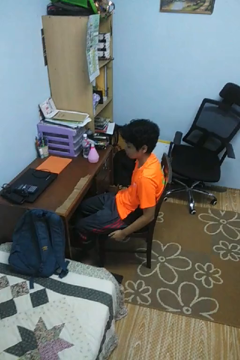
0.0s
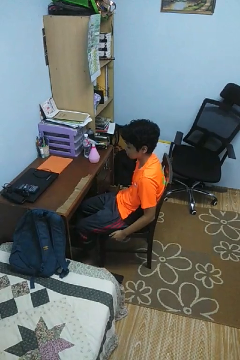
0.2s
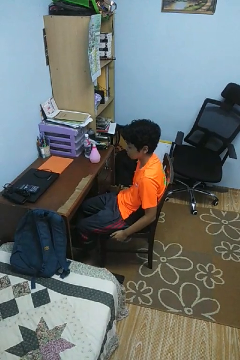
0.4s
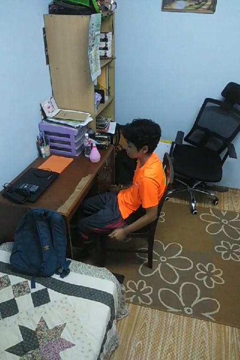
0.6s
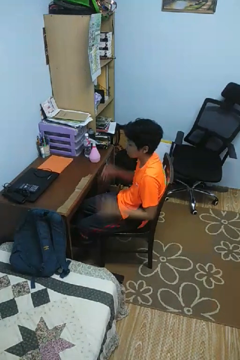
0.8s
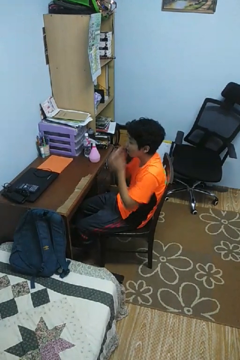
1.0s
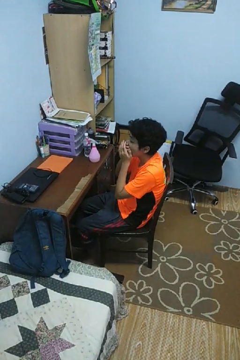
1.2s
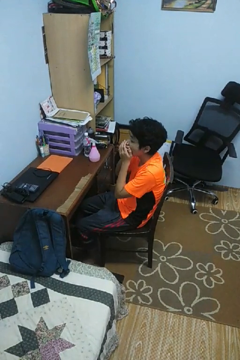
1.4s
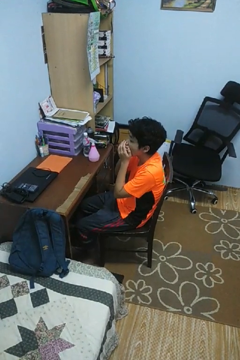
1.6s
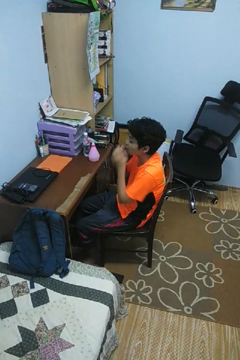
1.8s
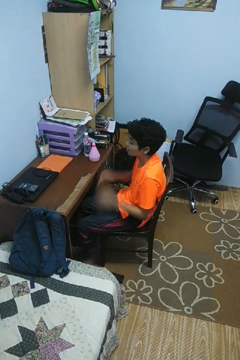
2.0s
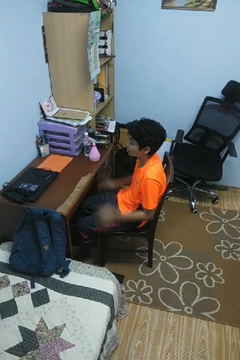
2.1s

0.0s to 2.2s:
person yawns

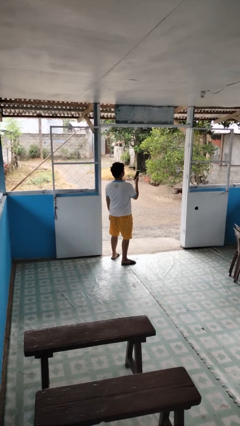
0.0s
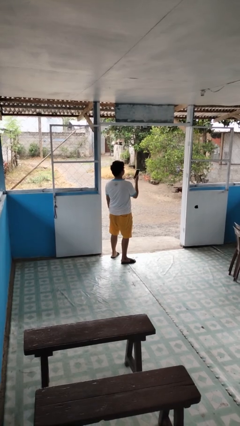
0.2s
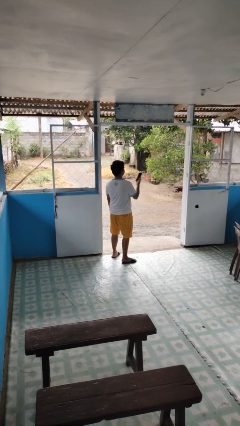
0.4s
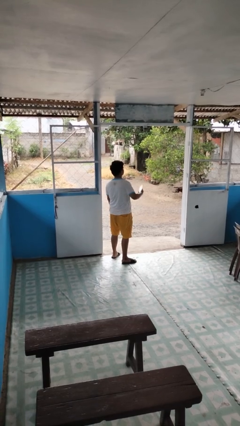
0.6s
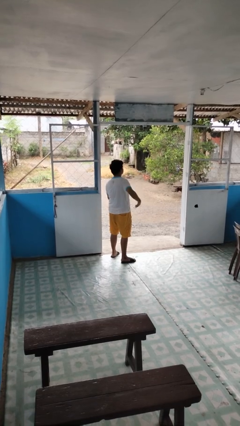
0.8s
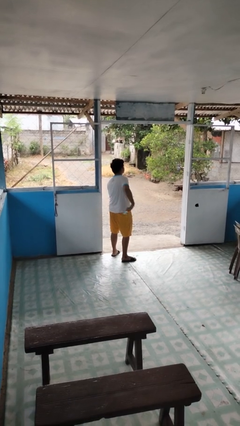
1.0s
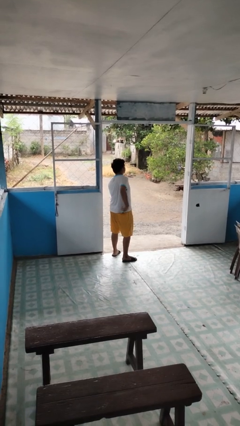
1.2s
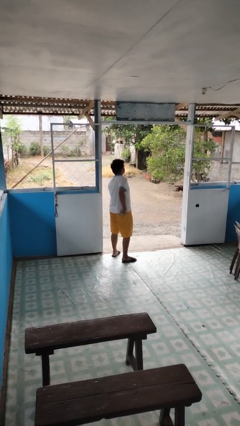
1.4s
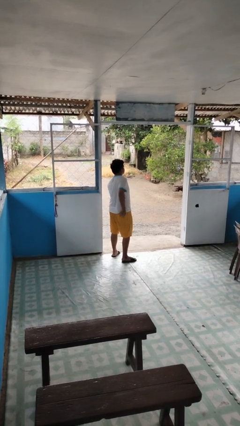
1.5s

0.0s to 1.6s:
person puts phone into pocket

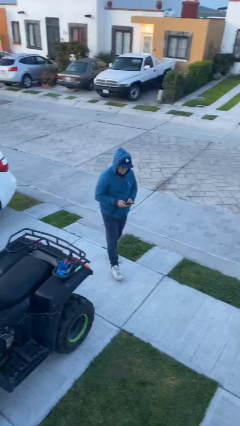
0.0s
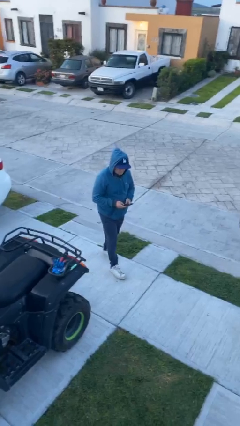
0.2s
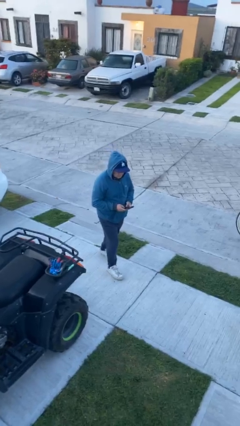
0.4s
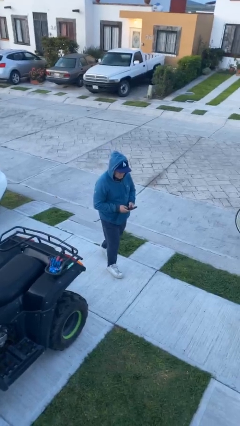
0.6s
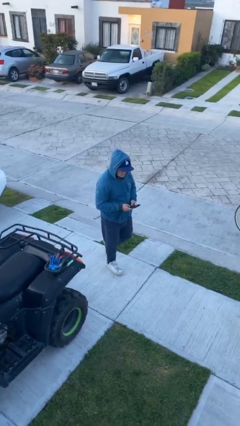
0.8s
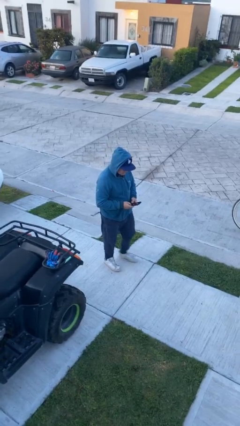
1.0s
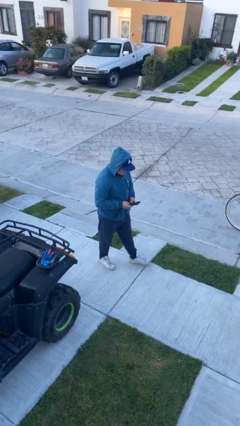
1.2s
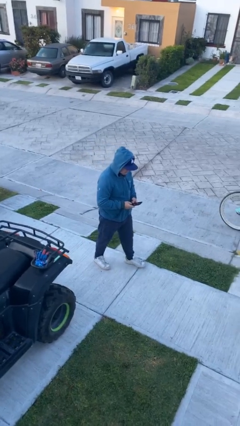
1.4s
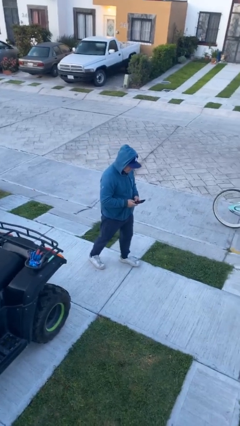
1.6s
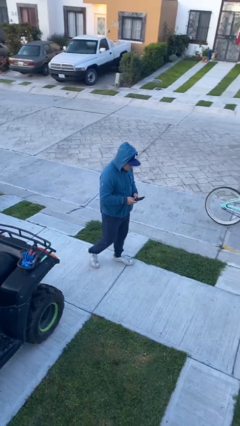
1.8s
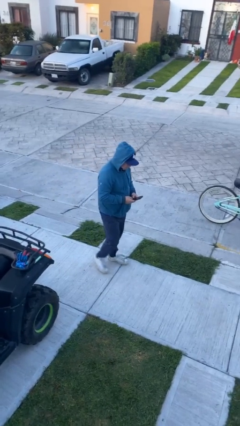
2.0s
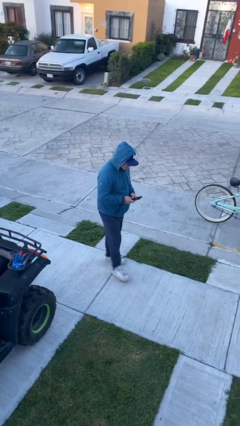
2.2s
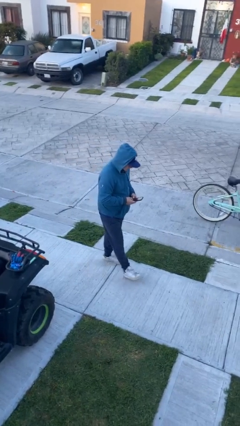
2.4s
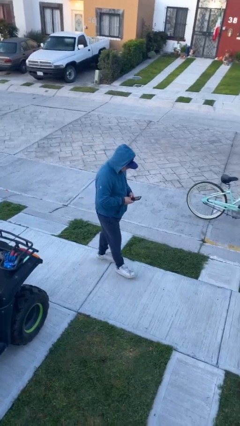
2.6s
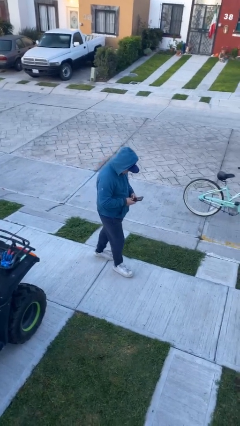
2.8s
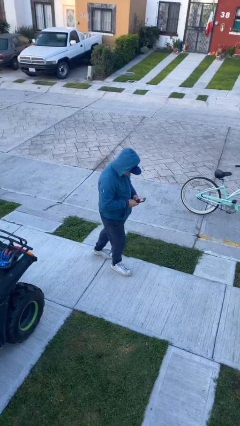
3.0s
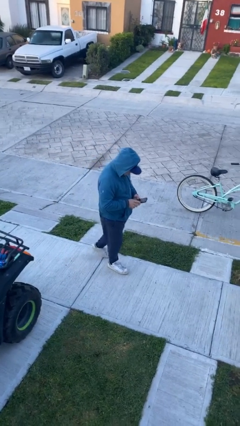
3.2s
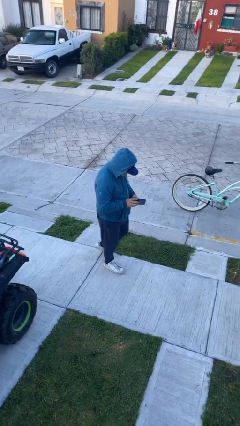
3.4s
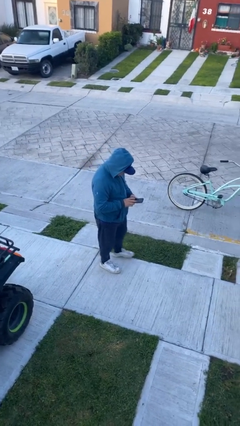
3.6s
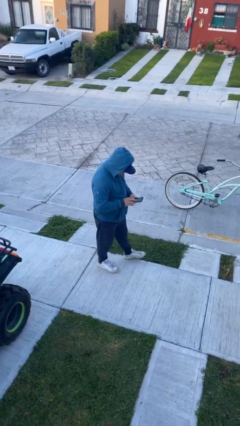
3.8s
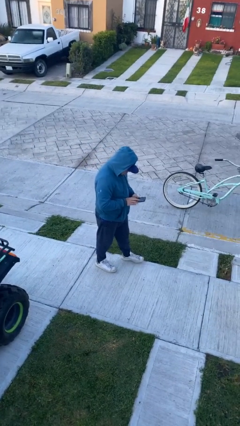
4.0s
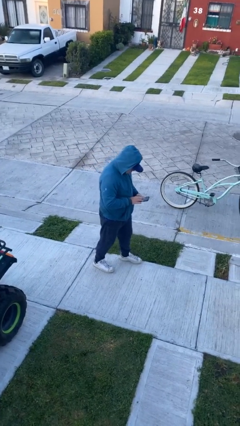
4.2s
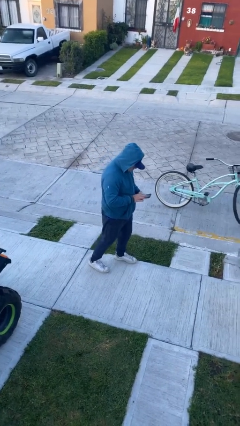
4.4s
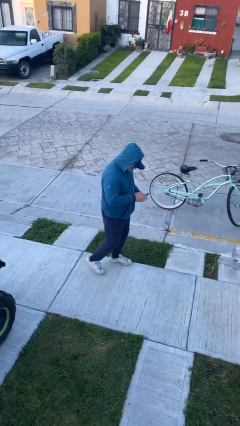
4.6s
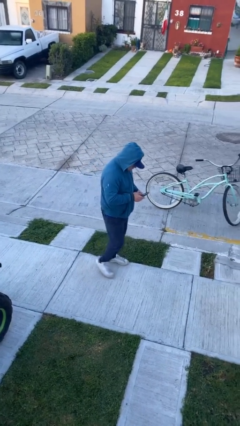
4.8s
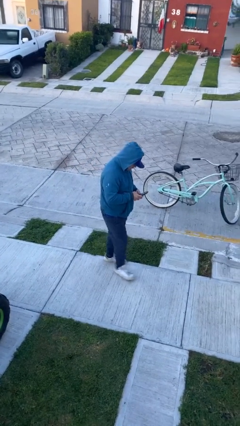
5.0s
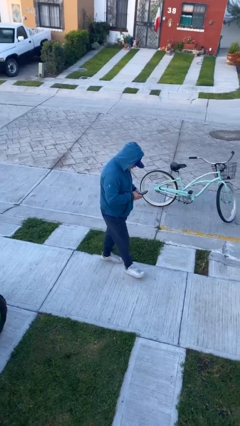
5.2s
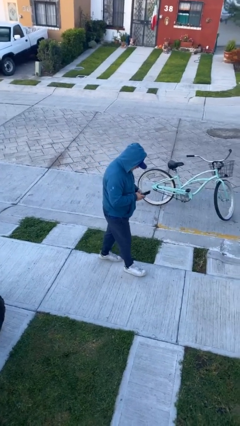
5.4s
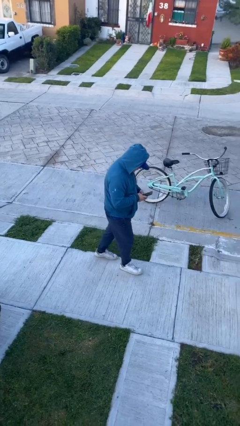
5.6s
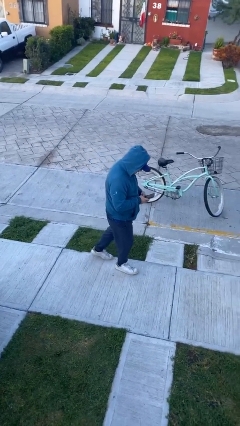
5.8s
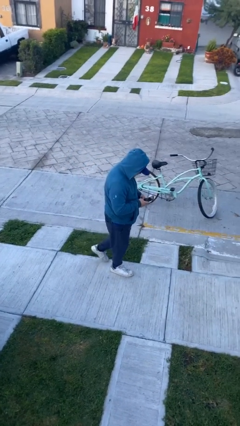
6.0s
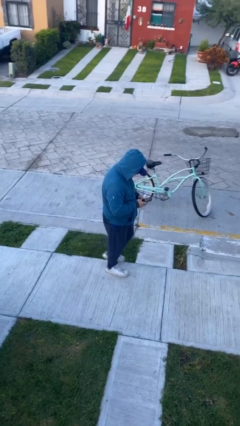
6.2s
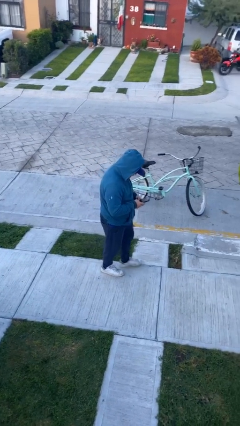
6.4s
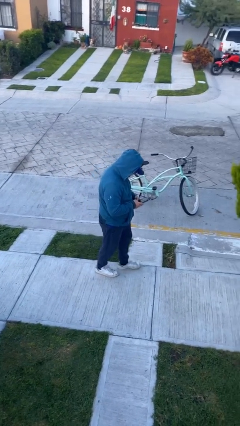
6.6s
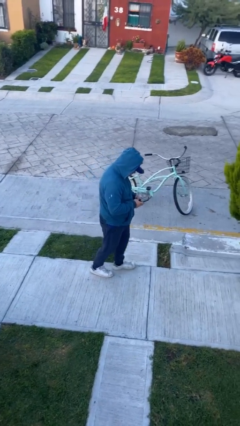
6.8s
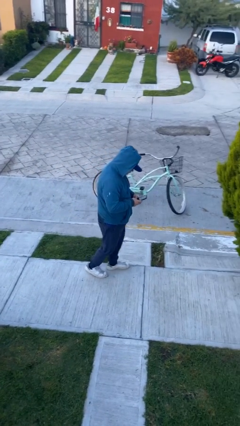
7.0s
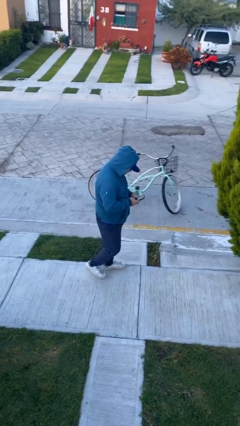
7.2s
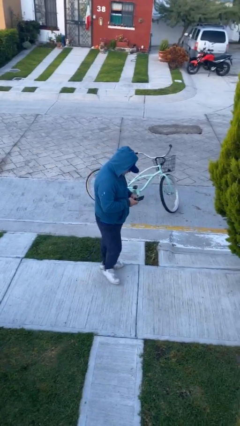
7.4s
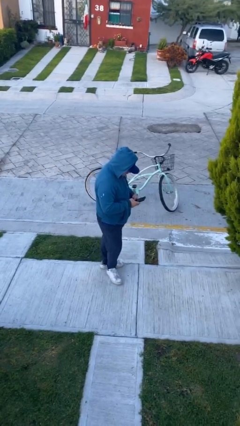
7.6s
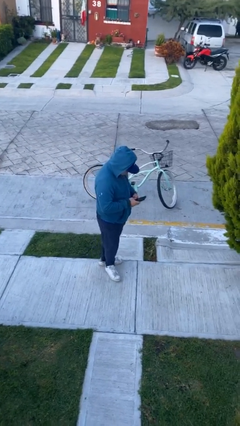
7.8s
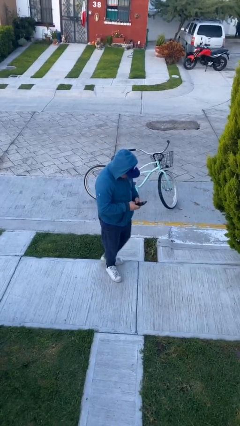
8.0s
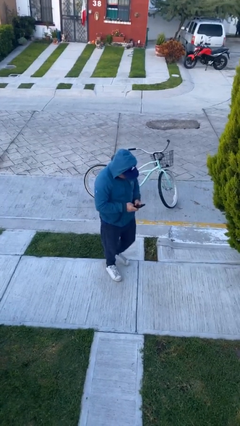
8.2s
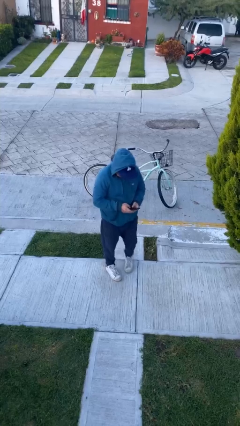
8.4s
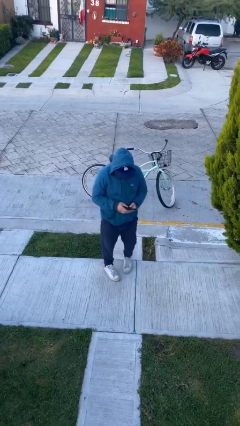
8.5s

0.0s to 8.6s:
person texts on phone

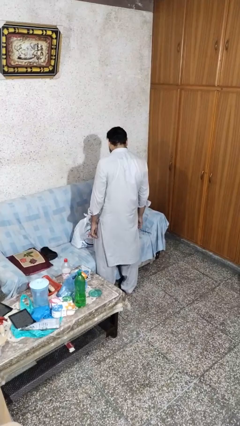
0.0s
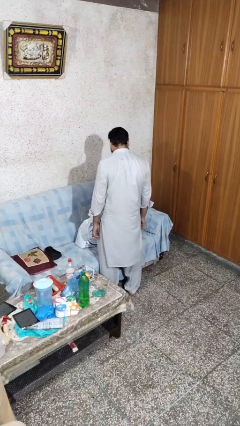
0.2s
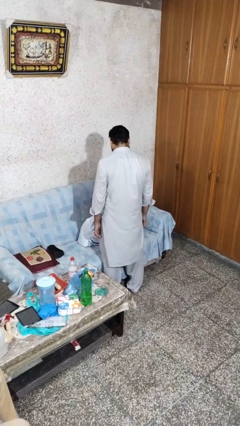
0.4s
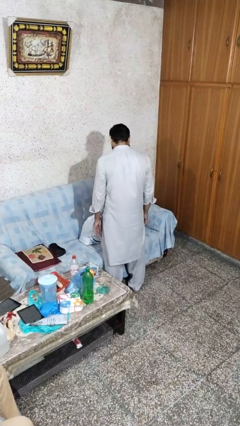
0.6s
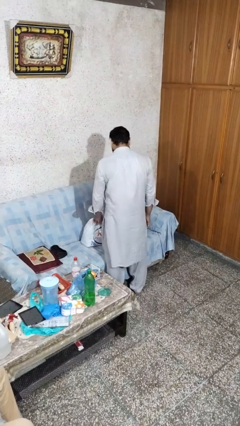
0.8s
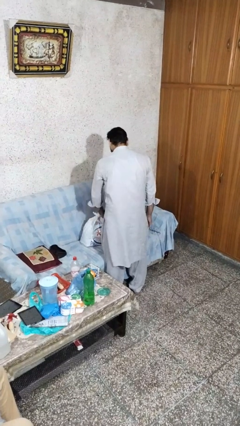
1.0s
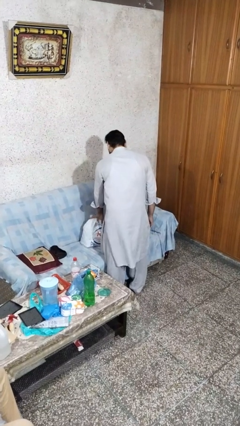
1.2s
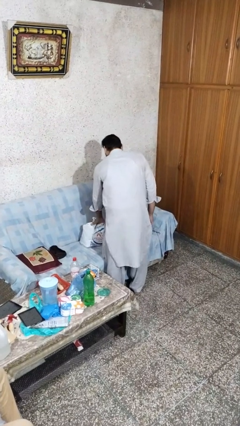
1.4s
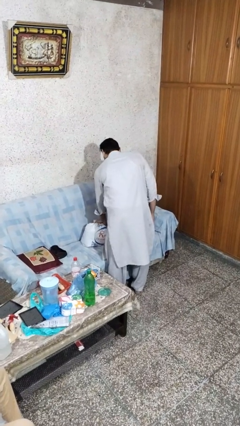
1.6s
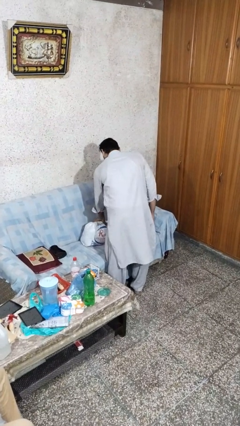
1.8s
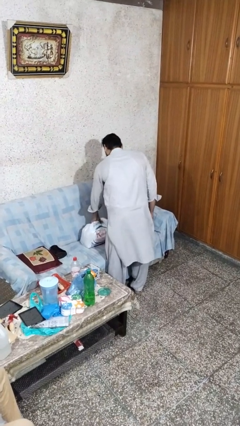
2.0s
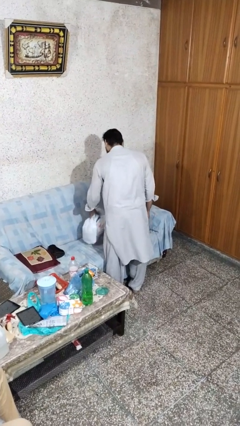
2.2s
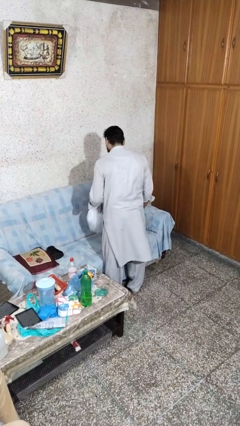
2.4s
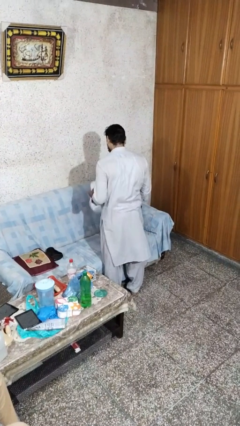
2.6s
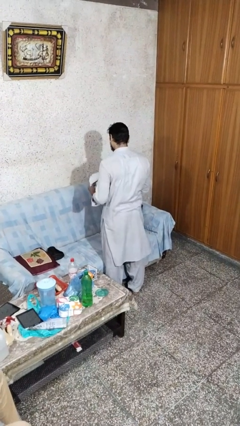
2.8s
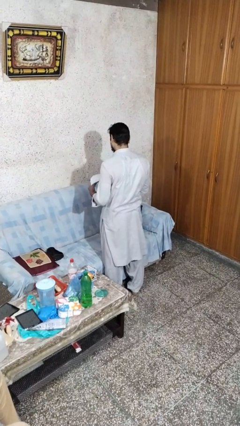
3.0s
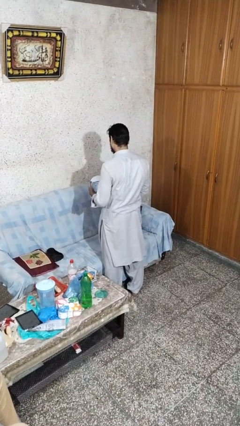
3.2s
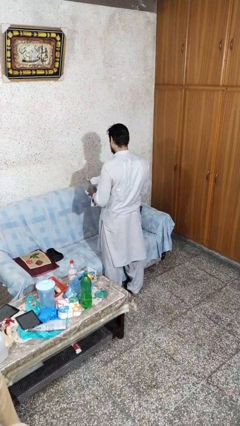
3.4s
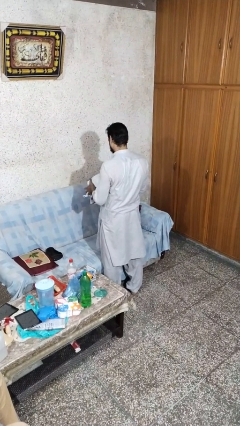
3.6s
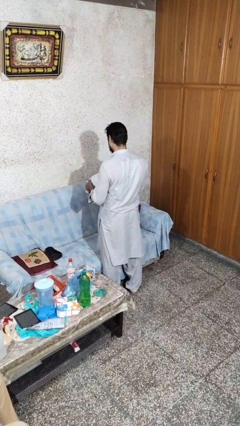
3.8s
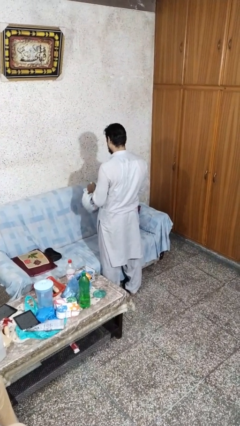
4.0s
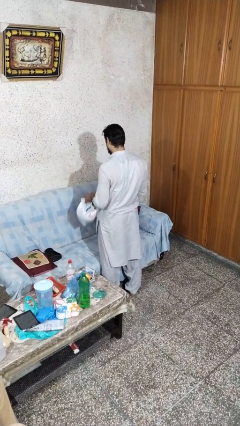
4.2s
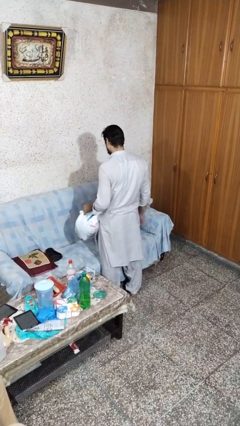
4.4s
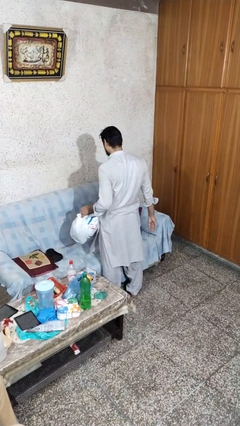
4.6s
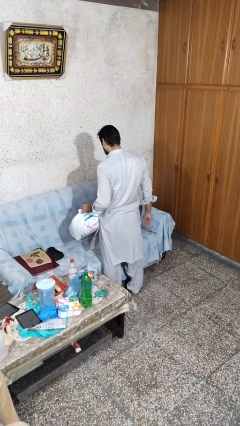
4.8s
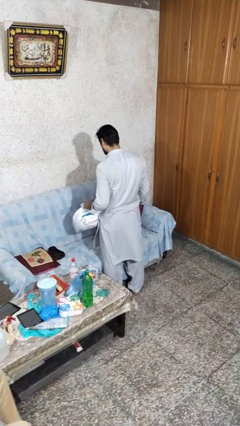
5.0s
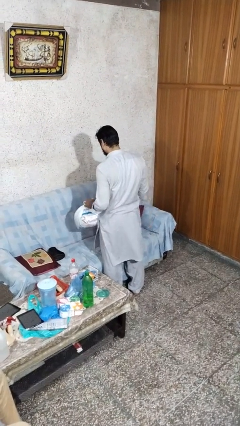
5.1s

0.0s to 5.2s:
person picks up object from couch

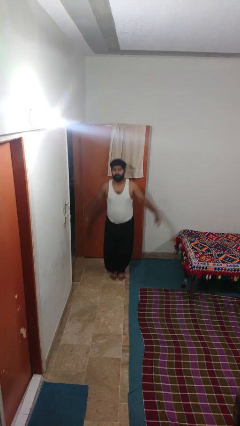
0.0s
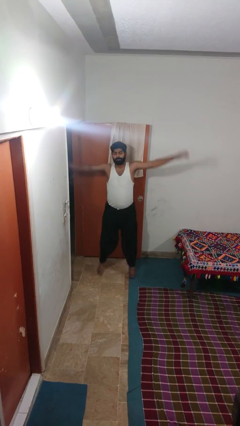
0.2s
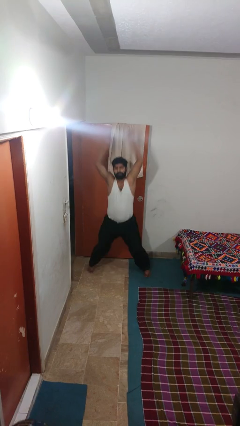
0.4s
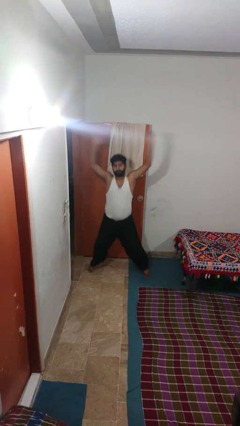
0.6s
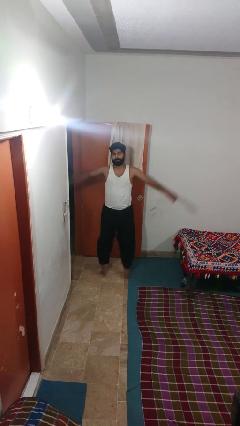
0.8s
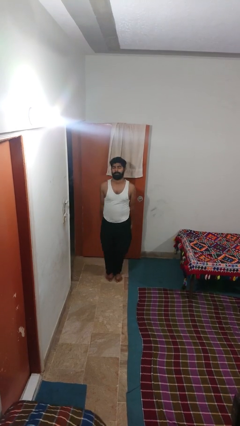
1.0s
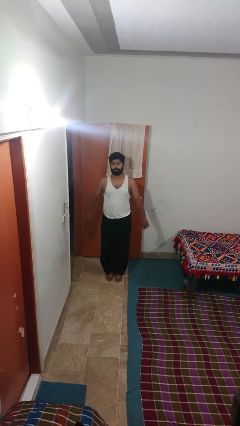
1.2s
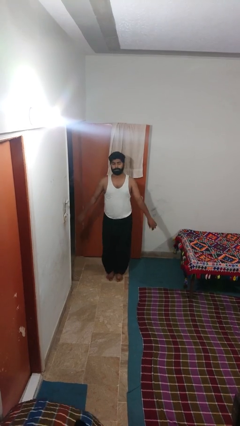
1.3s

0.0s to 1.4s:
person exercises with jumping jacks
